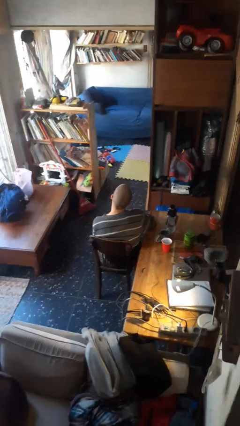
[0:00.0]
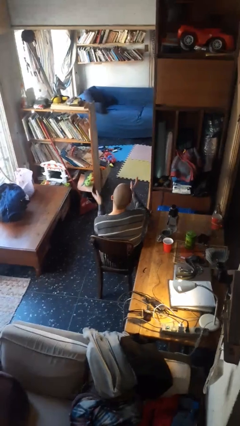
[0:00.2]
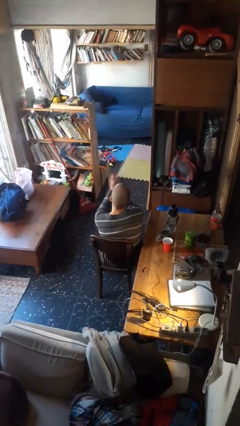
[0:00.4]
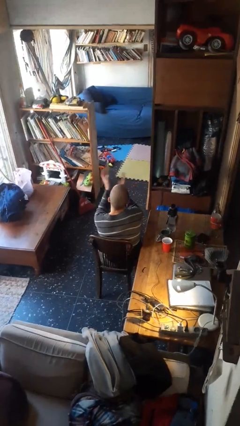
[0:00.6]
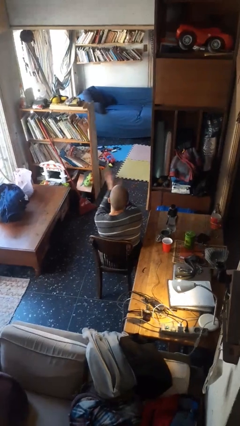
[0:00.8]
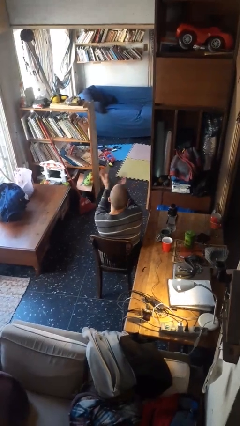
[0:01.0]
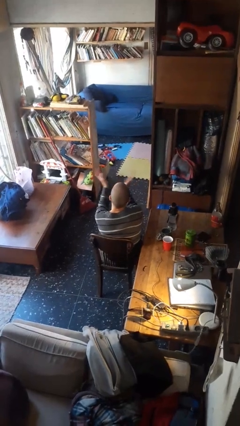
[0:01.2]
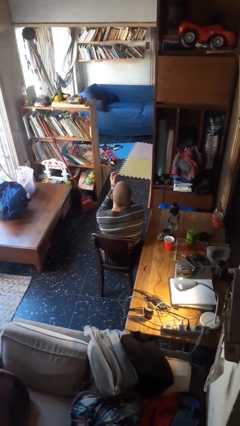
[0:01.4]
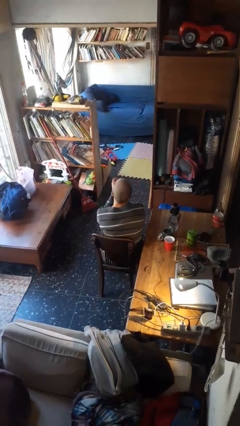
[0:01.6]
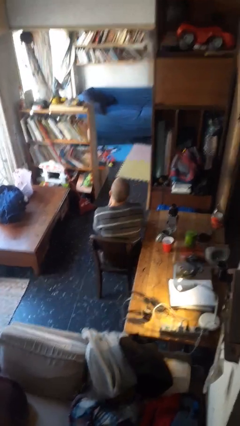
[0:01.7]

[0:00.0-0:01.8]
person claps hands

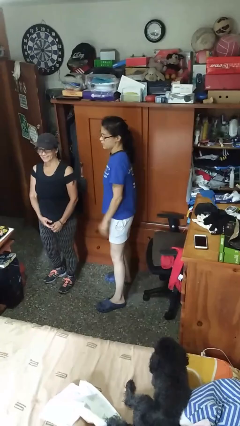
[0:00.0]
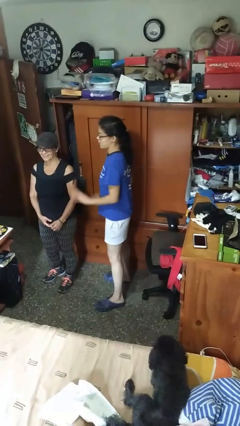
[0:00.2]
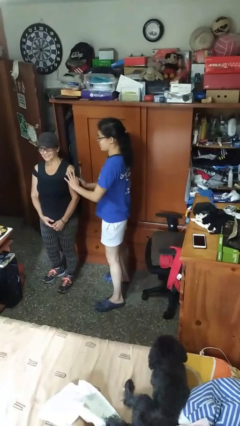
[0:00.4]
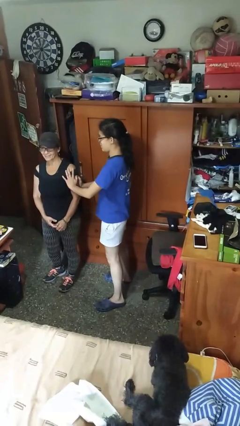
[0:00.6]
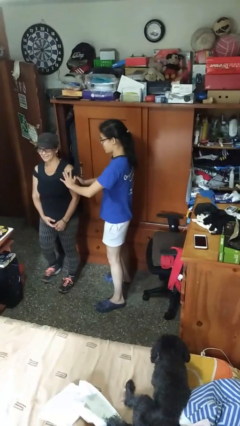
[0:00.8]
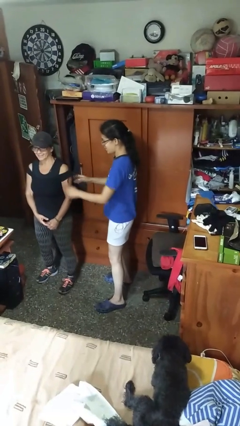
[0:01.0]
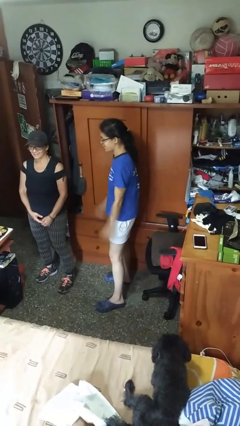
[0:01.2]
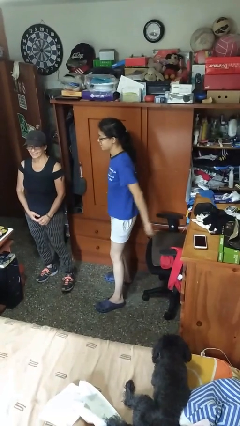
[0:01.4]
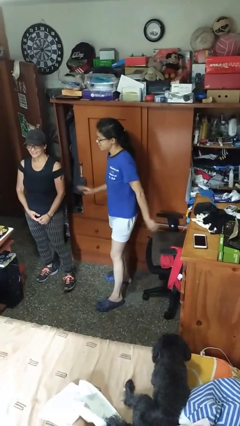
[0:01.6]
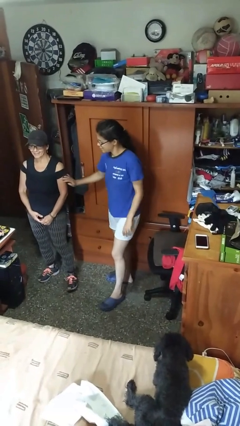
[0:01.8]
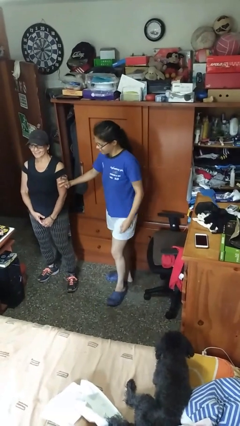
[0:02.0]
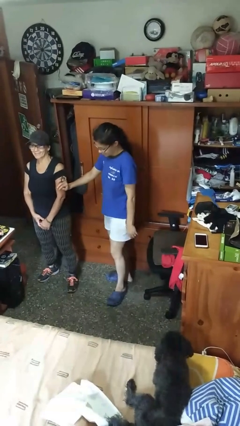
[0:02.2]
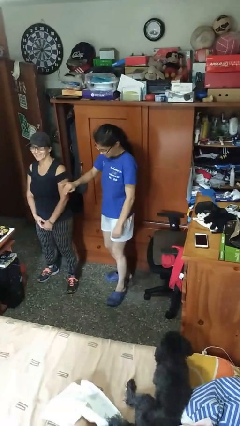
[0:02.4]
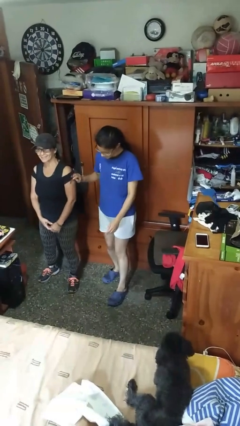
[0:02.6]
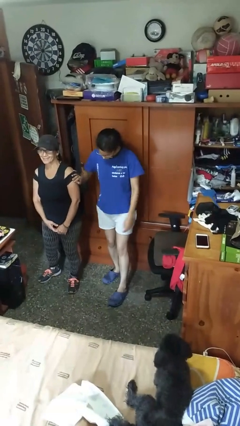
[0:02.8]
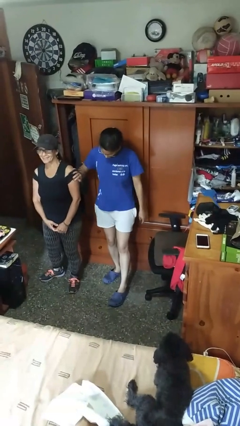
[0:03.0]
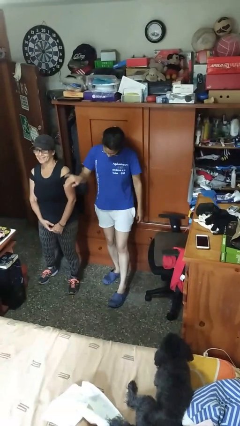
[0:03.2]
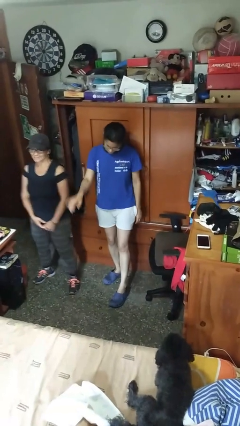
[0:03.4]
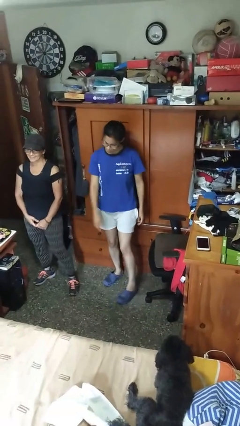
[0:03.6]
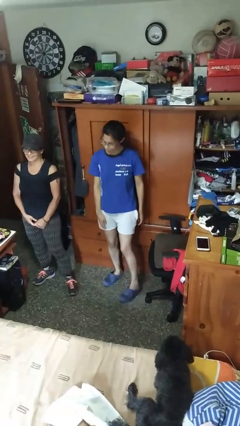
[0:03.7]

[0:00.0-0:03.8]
person shoves person

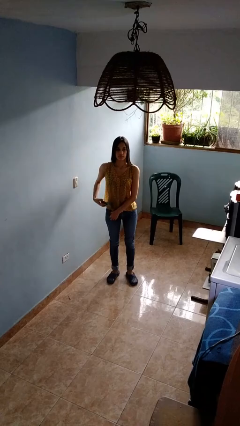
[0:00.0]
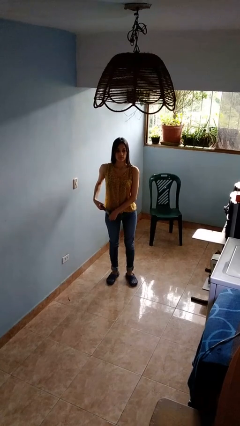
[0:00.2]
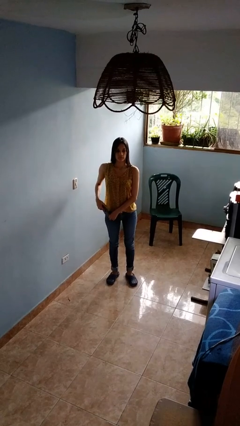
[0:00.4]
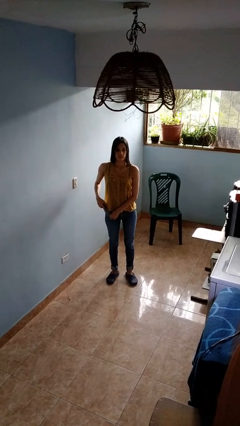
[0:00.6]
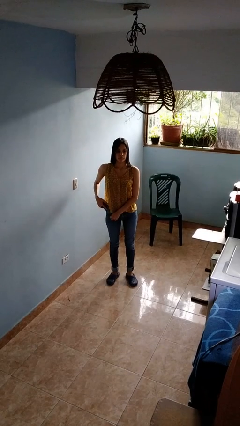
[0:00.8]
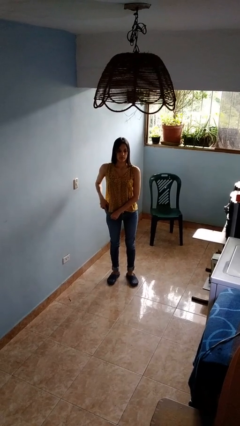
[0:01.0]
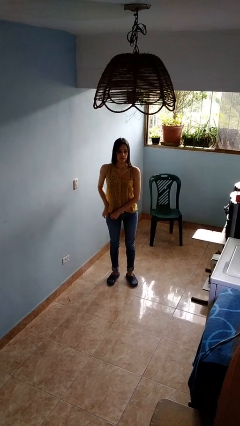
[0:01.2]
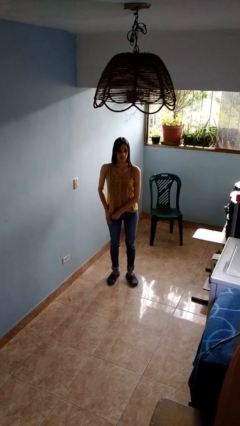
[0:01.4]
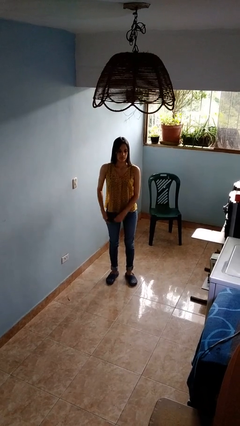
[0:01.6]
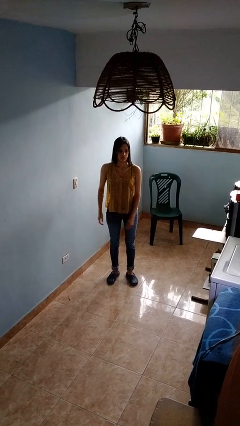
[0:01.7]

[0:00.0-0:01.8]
person puts phone into pocket

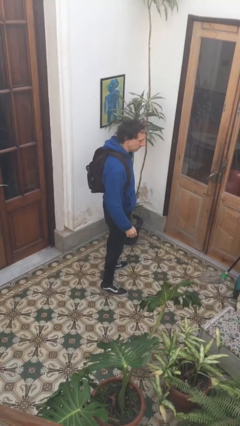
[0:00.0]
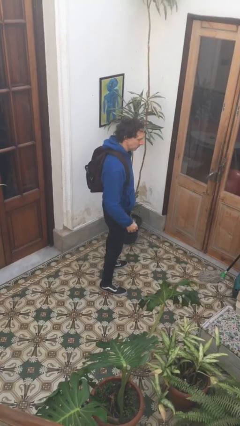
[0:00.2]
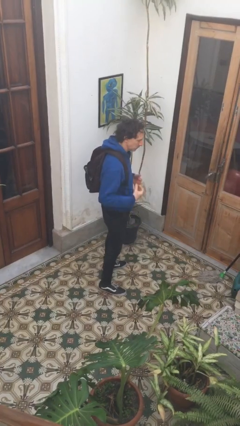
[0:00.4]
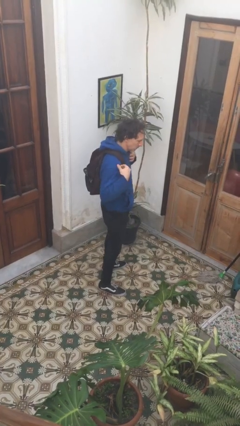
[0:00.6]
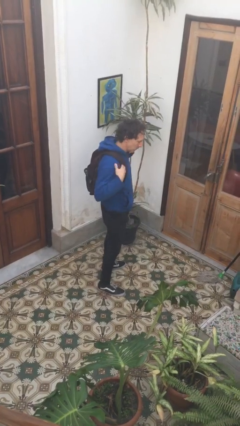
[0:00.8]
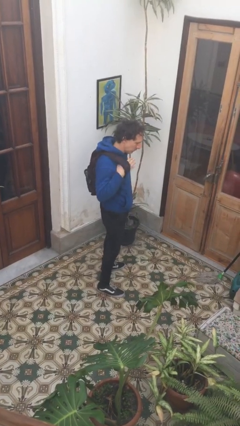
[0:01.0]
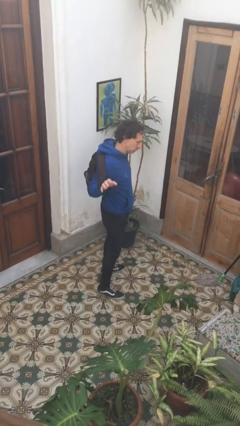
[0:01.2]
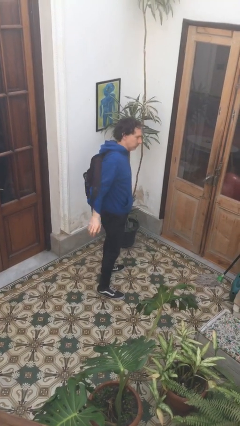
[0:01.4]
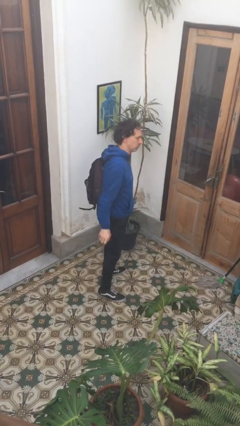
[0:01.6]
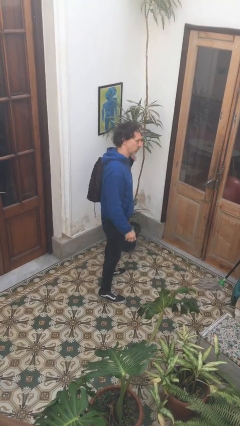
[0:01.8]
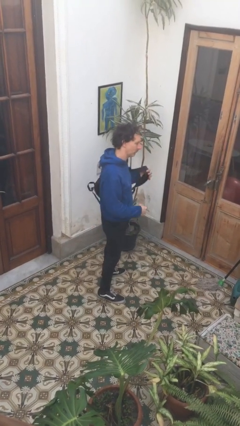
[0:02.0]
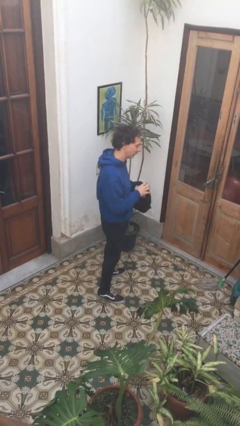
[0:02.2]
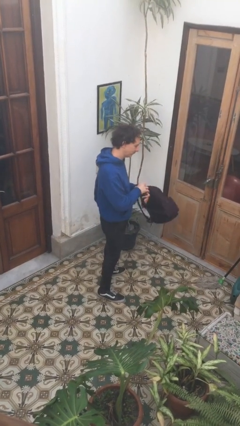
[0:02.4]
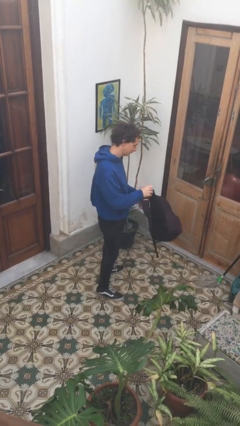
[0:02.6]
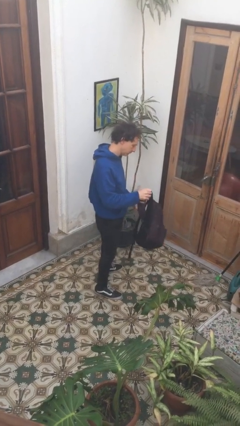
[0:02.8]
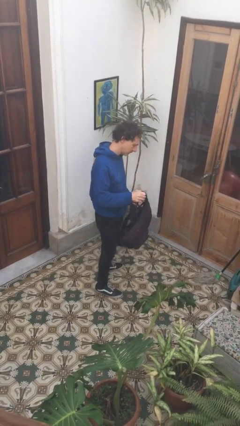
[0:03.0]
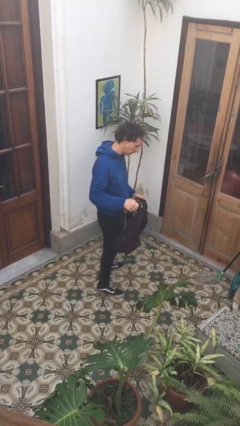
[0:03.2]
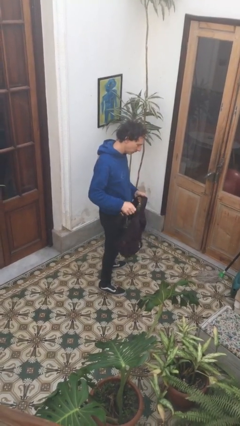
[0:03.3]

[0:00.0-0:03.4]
person takes off backpack

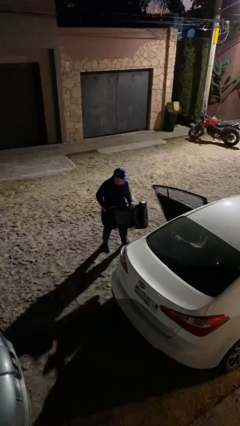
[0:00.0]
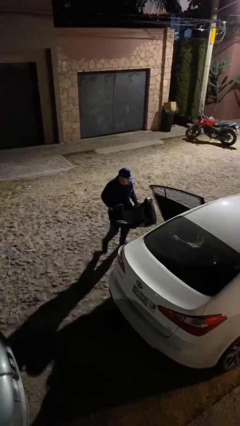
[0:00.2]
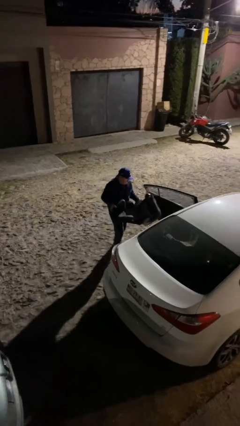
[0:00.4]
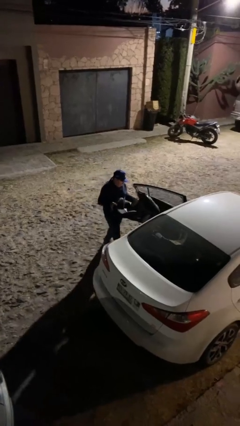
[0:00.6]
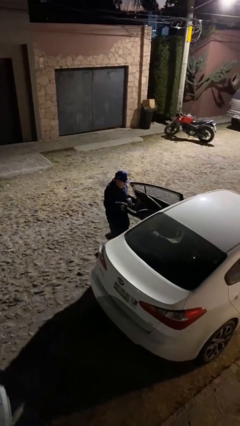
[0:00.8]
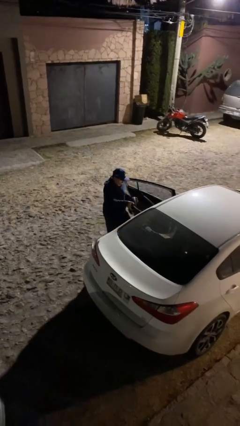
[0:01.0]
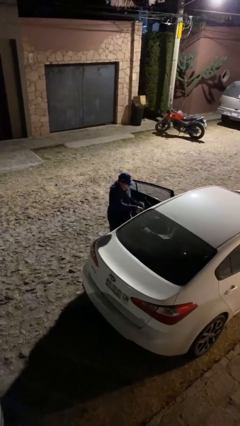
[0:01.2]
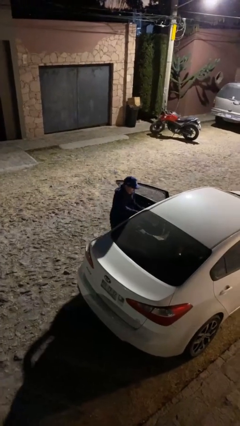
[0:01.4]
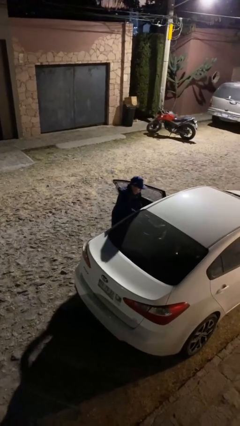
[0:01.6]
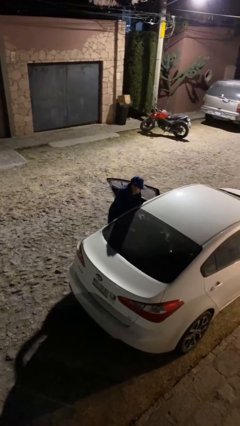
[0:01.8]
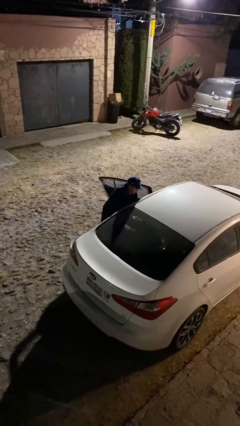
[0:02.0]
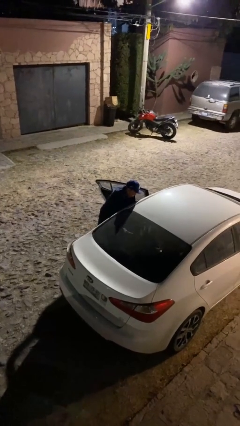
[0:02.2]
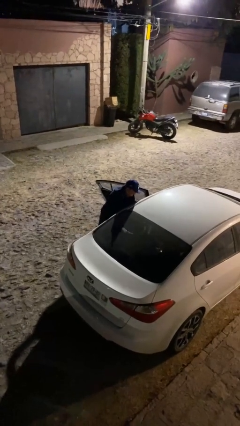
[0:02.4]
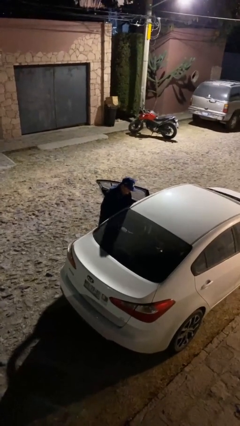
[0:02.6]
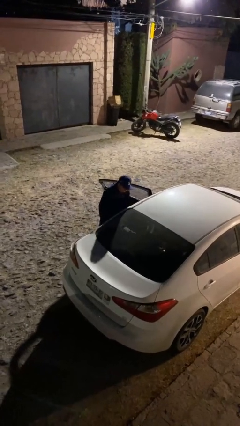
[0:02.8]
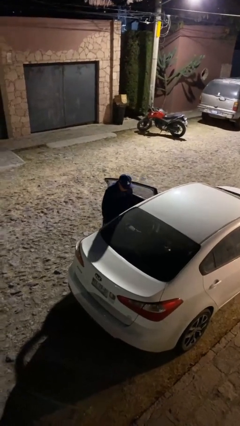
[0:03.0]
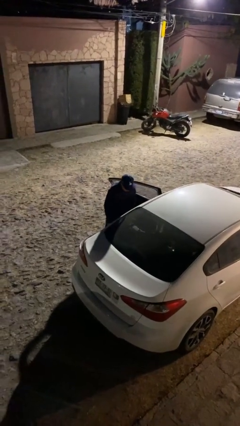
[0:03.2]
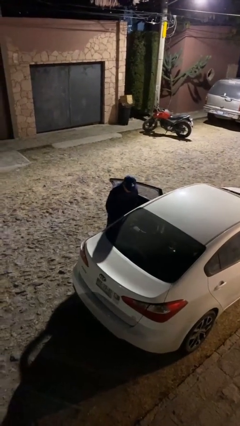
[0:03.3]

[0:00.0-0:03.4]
person loads car

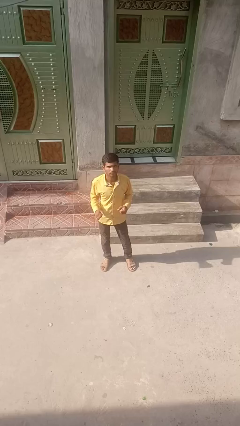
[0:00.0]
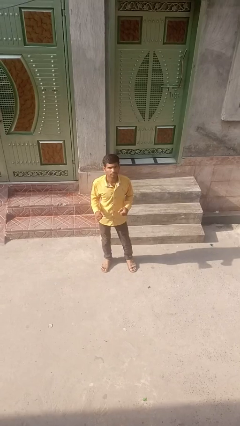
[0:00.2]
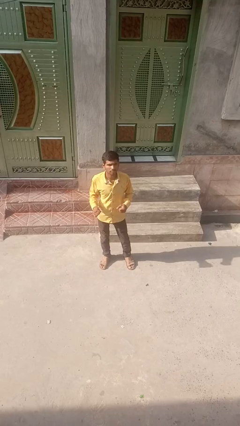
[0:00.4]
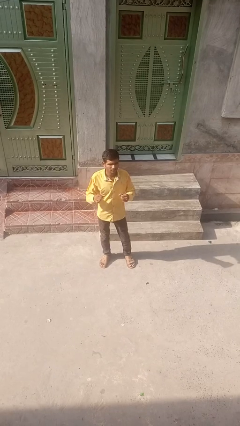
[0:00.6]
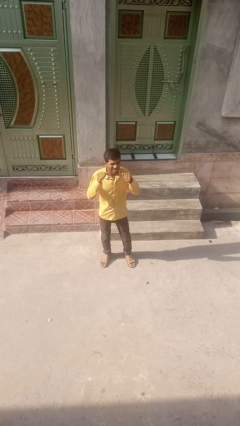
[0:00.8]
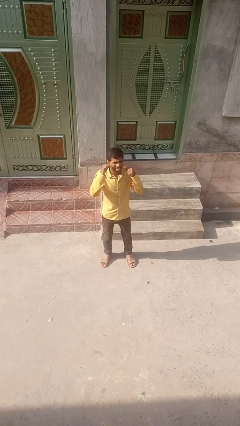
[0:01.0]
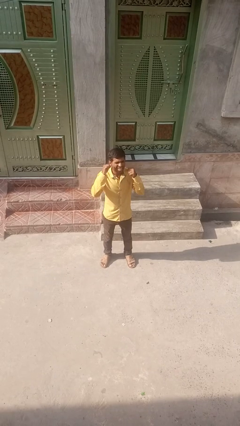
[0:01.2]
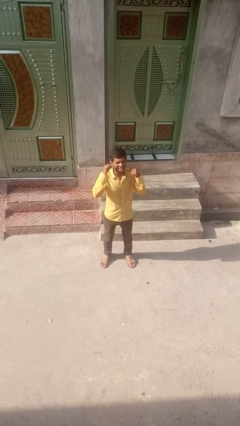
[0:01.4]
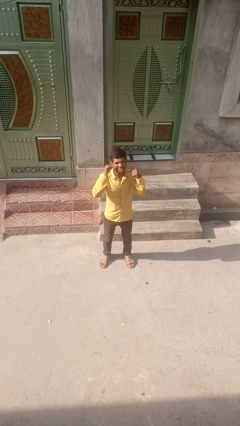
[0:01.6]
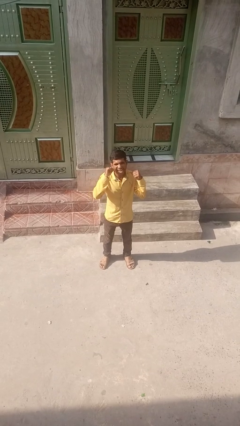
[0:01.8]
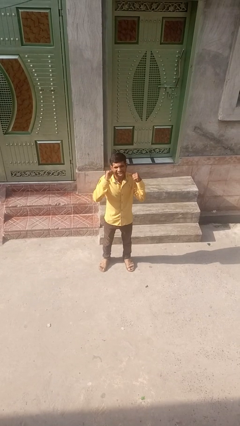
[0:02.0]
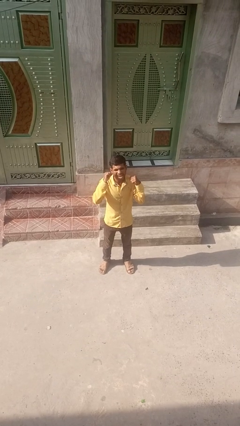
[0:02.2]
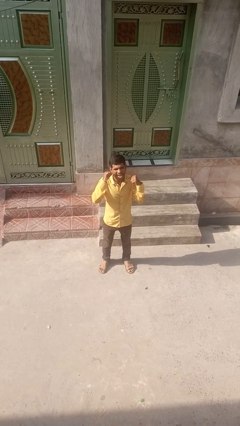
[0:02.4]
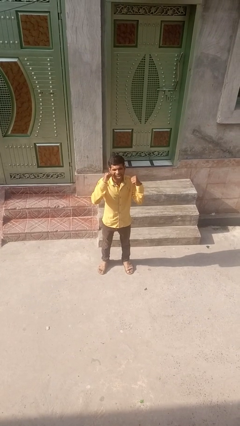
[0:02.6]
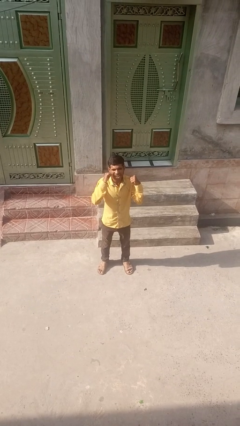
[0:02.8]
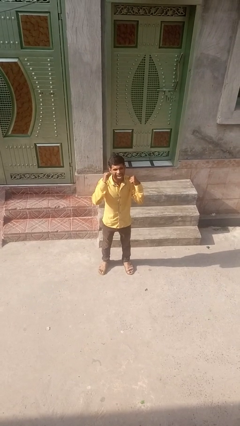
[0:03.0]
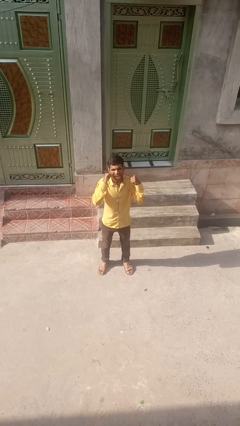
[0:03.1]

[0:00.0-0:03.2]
person flosses
